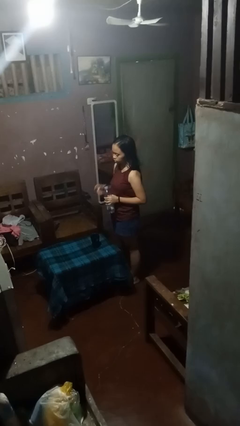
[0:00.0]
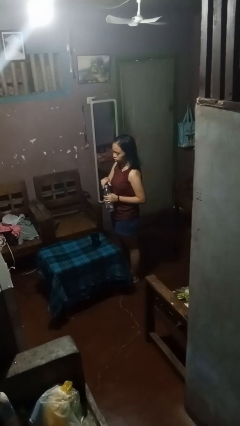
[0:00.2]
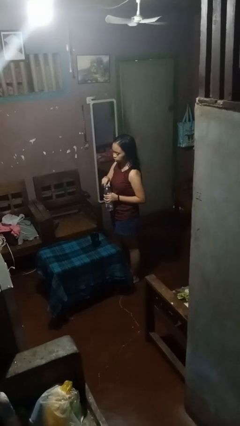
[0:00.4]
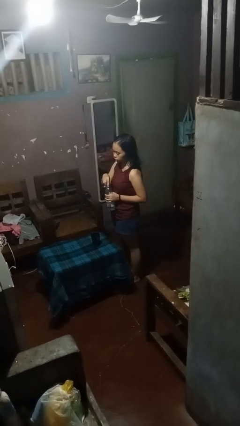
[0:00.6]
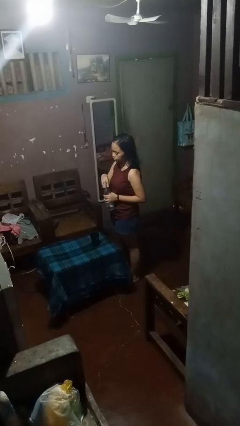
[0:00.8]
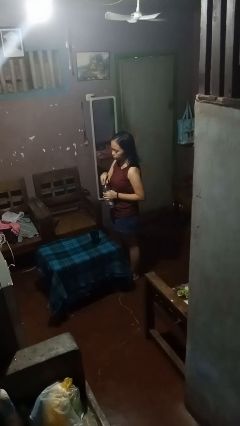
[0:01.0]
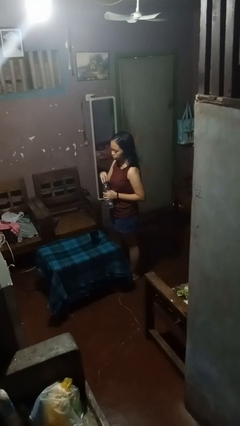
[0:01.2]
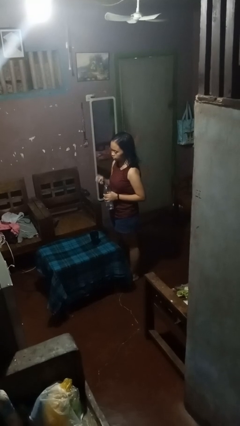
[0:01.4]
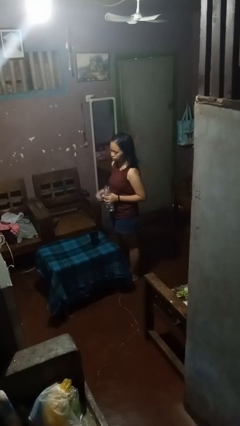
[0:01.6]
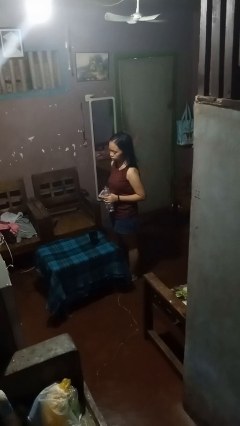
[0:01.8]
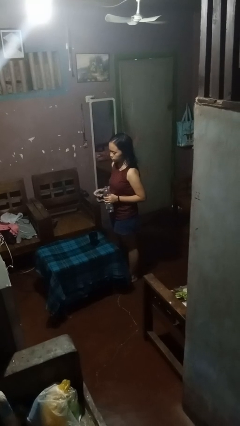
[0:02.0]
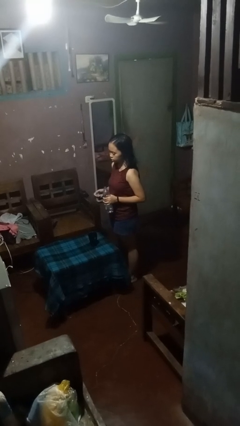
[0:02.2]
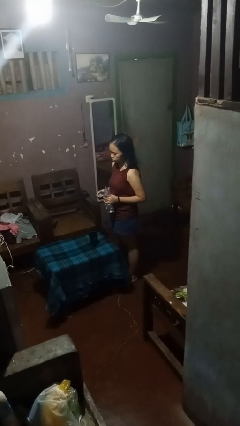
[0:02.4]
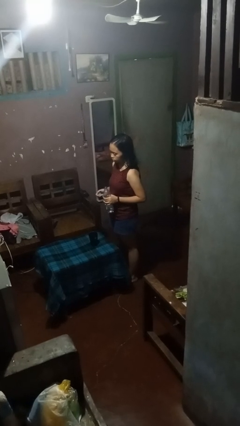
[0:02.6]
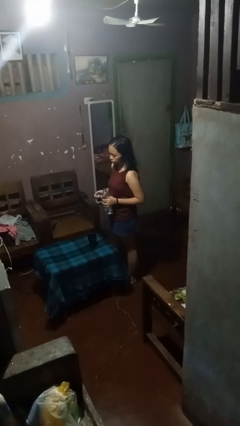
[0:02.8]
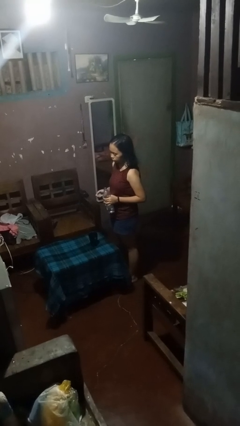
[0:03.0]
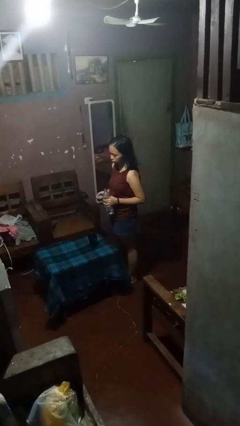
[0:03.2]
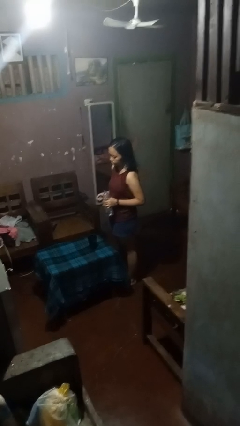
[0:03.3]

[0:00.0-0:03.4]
person unscrews lid from bottle

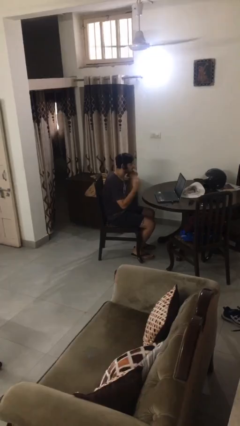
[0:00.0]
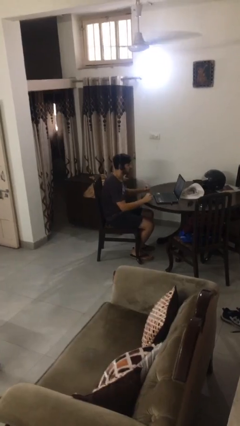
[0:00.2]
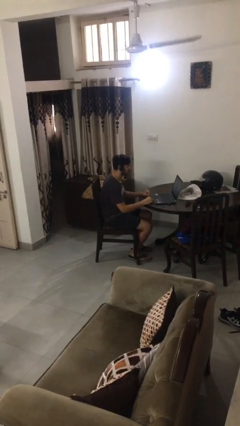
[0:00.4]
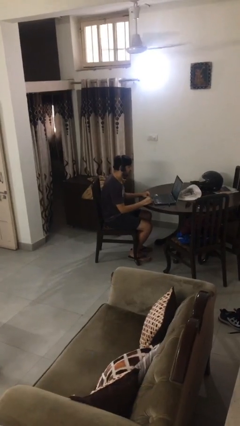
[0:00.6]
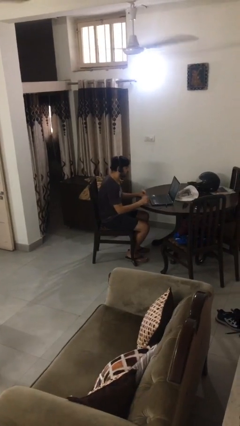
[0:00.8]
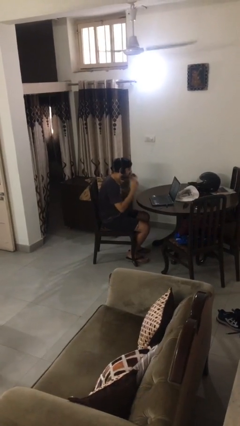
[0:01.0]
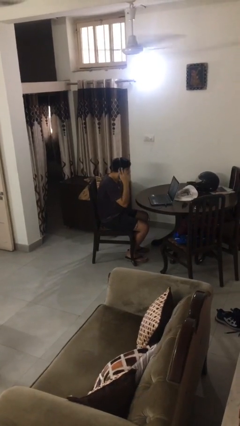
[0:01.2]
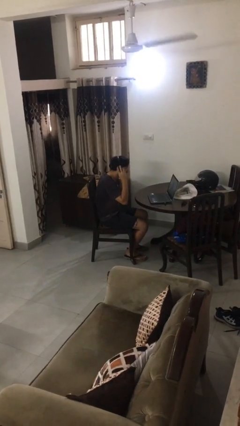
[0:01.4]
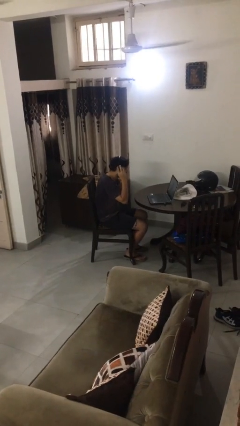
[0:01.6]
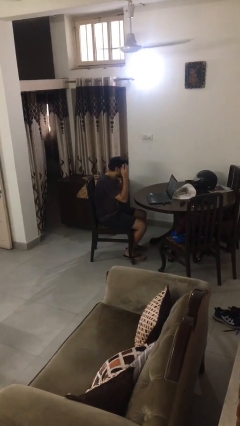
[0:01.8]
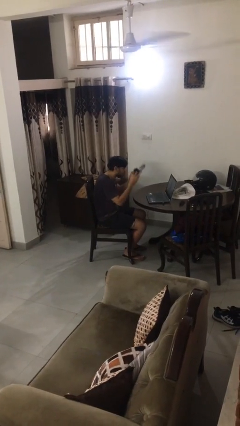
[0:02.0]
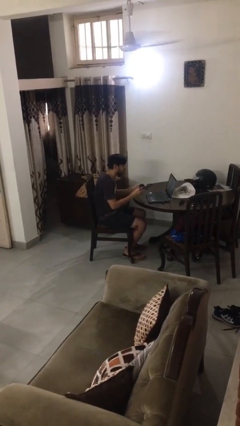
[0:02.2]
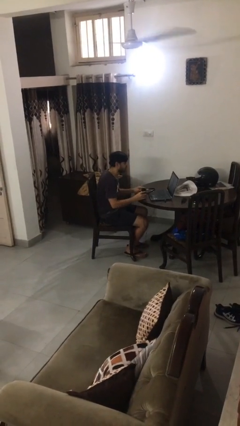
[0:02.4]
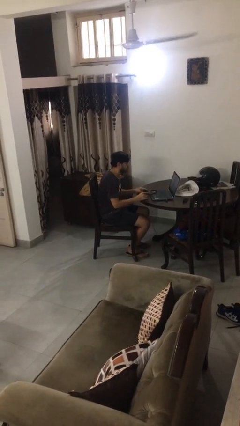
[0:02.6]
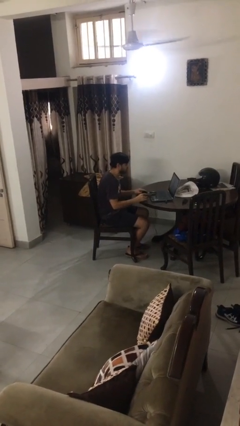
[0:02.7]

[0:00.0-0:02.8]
person takes off headphones

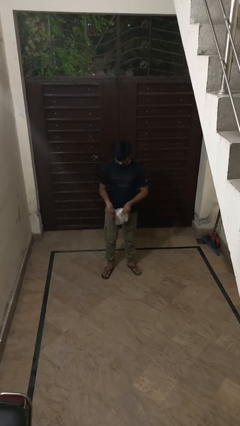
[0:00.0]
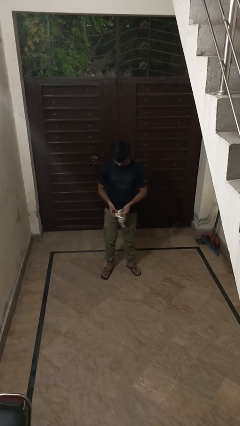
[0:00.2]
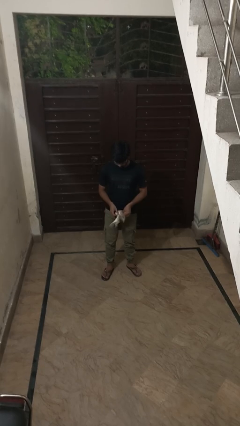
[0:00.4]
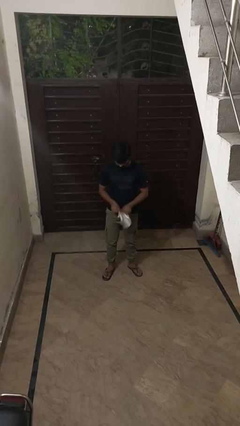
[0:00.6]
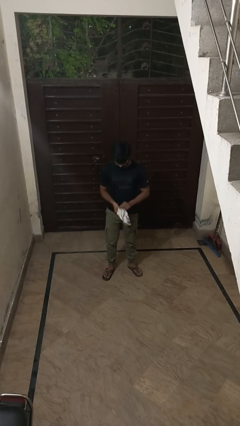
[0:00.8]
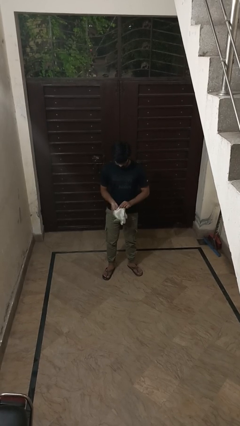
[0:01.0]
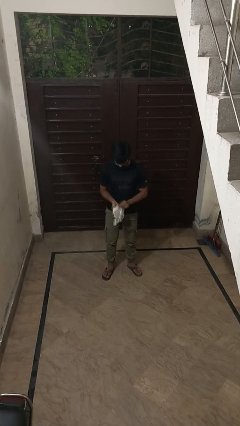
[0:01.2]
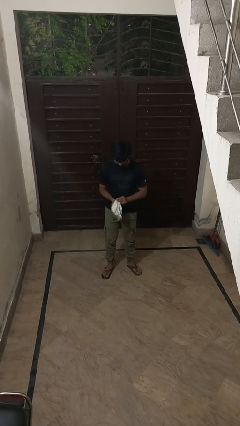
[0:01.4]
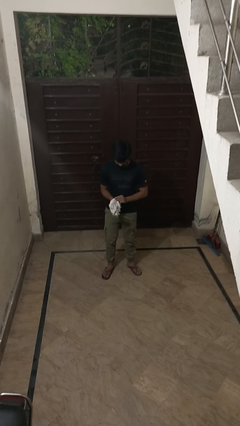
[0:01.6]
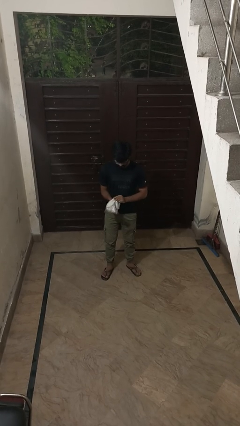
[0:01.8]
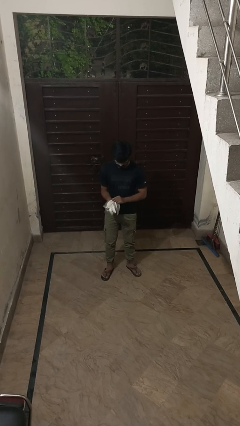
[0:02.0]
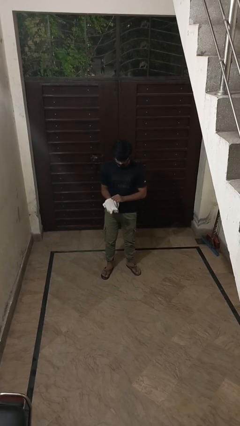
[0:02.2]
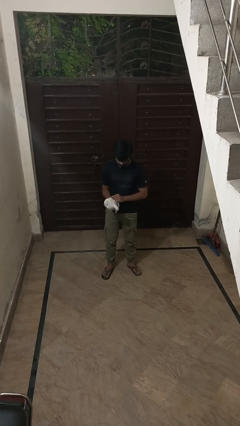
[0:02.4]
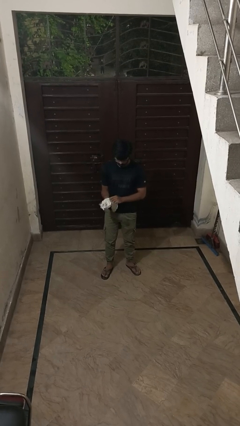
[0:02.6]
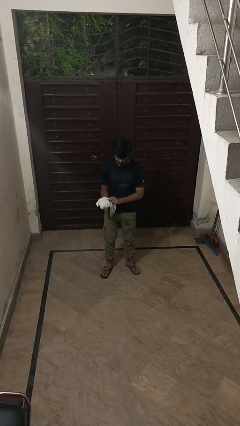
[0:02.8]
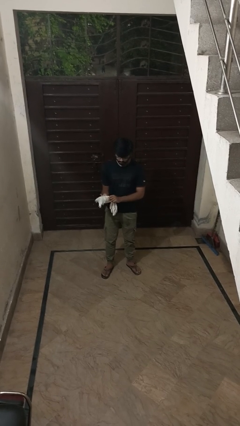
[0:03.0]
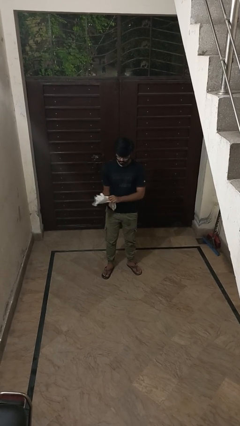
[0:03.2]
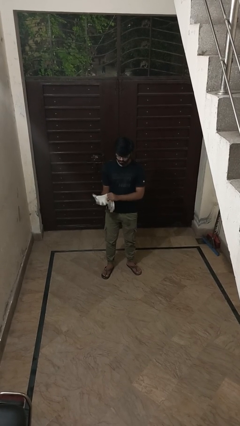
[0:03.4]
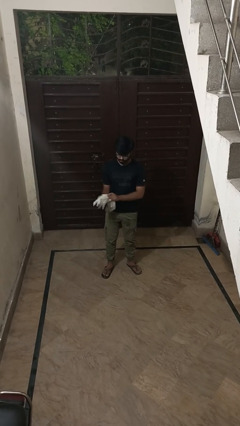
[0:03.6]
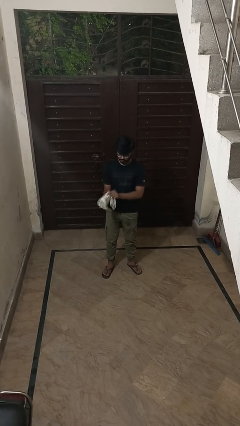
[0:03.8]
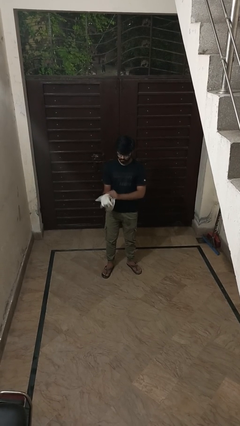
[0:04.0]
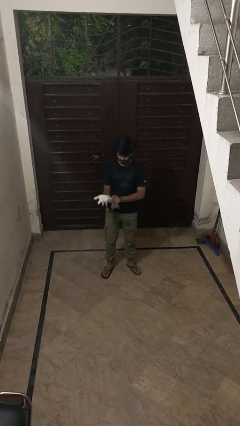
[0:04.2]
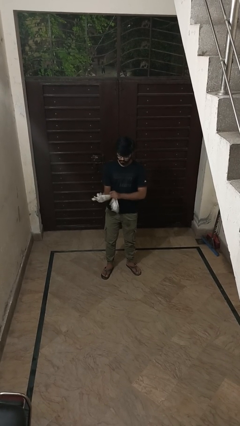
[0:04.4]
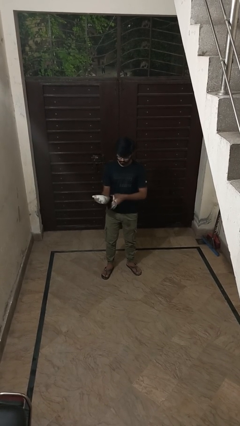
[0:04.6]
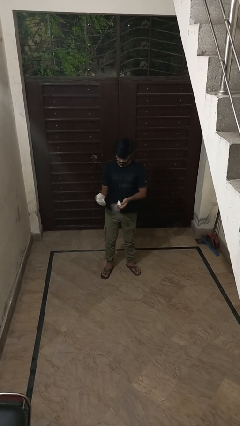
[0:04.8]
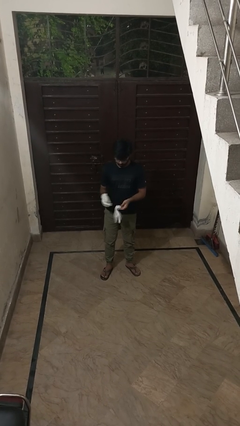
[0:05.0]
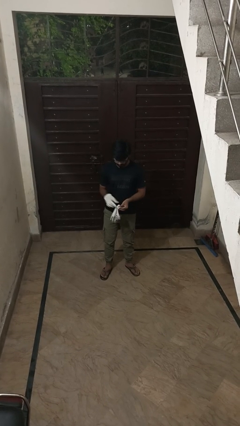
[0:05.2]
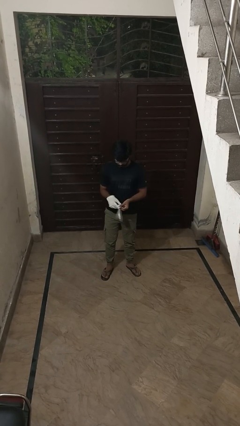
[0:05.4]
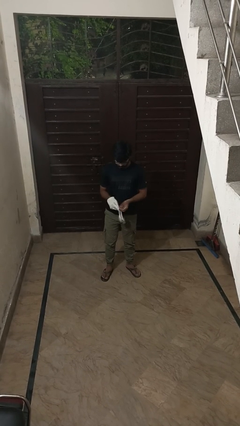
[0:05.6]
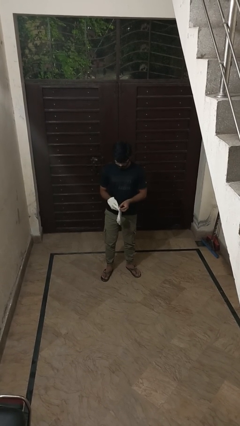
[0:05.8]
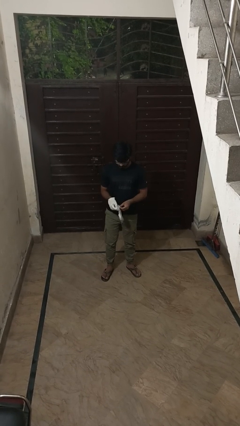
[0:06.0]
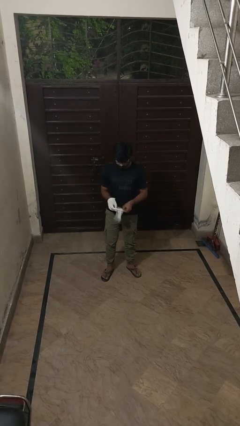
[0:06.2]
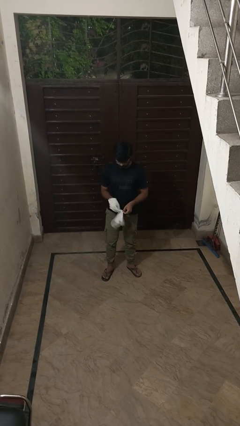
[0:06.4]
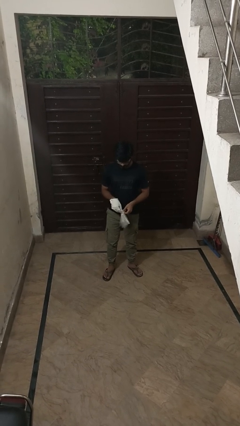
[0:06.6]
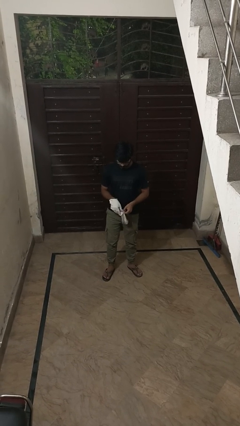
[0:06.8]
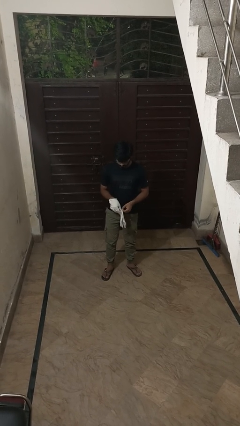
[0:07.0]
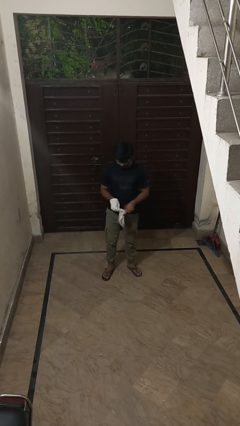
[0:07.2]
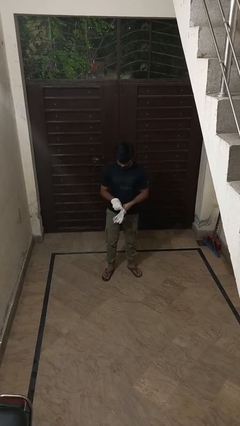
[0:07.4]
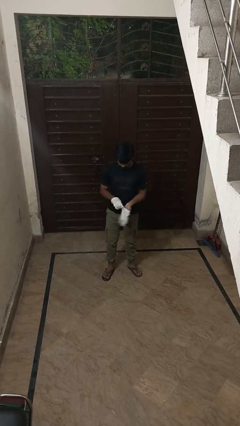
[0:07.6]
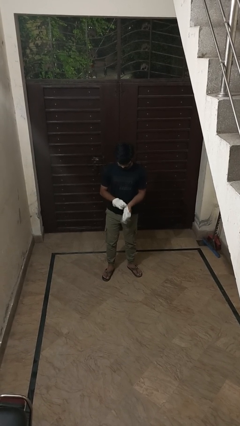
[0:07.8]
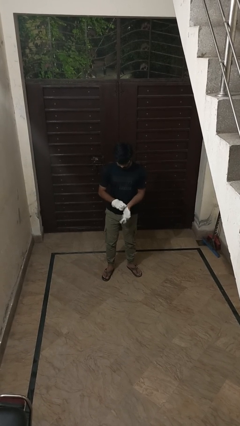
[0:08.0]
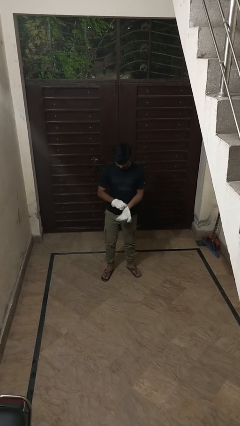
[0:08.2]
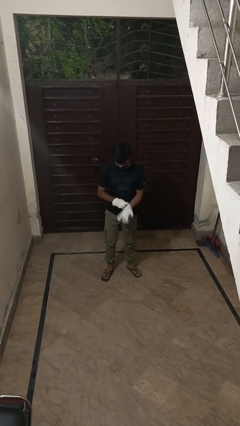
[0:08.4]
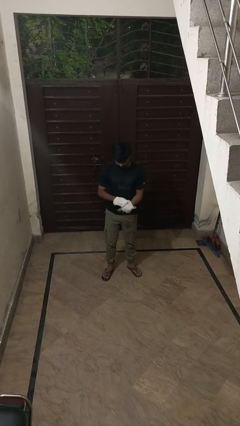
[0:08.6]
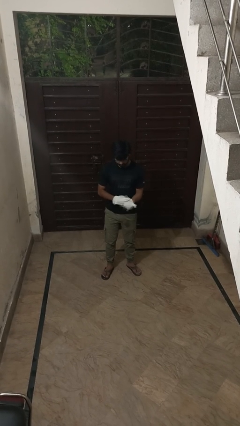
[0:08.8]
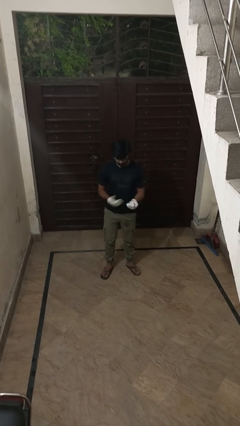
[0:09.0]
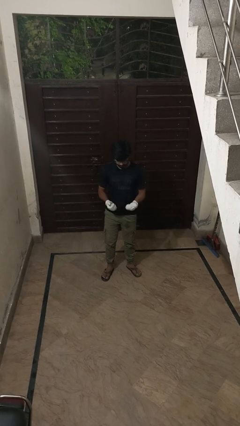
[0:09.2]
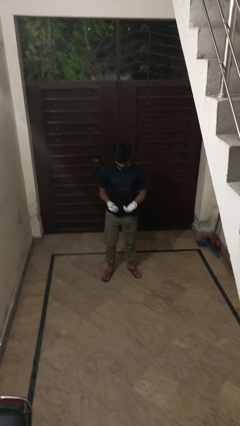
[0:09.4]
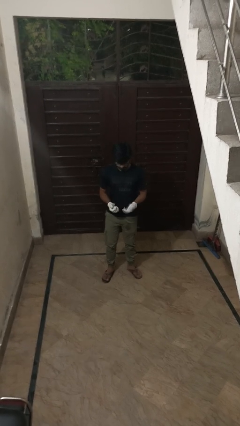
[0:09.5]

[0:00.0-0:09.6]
person puts on gloves

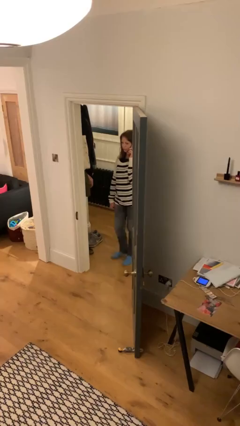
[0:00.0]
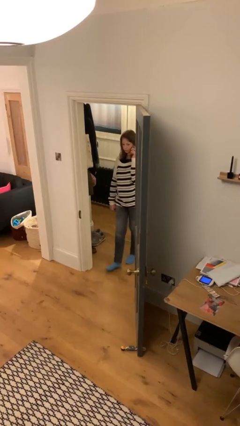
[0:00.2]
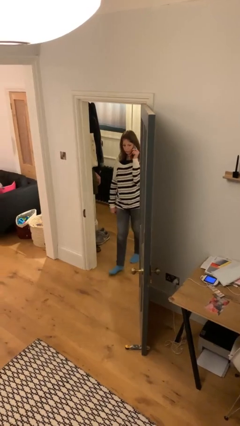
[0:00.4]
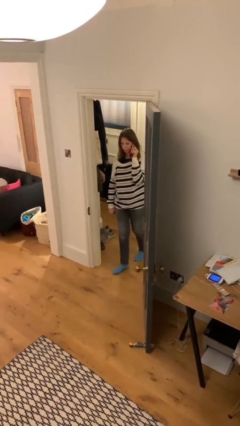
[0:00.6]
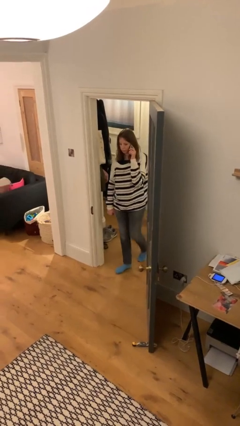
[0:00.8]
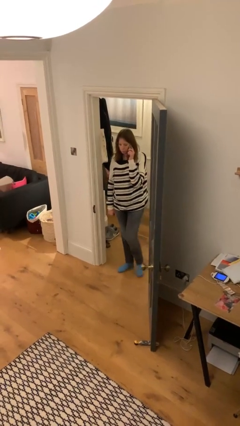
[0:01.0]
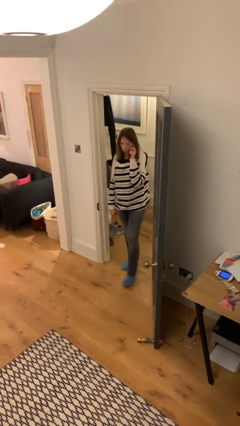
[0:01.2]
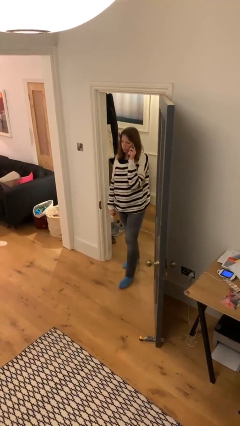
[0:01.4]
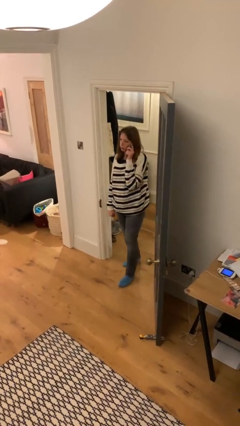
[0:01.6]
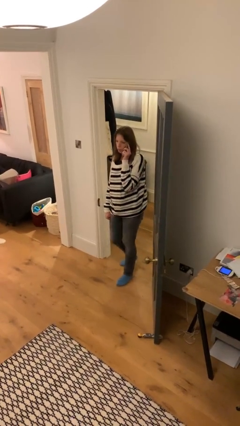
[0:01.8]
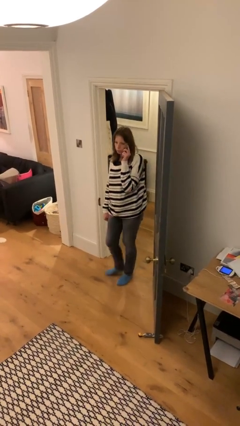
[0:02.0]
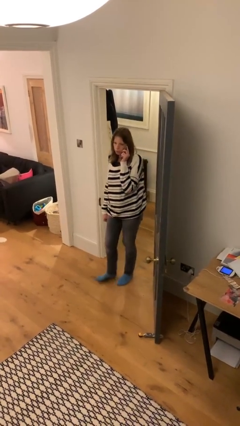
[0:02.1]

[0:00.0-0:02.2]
person enters scene through structure
